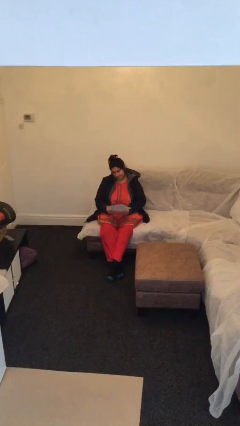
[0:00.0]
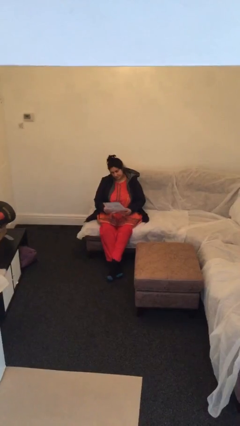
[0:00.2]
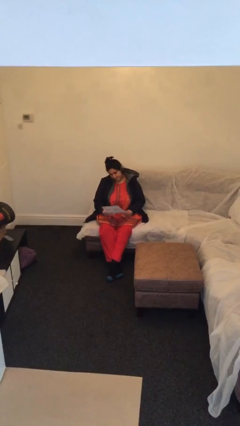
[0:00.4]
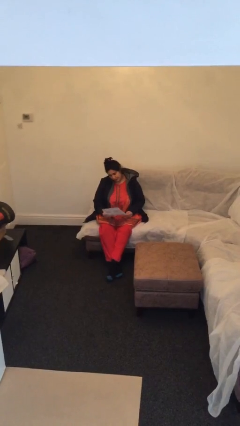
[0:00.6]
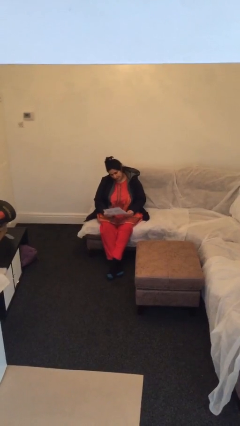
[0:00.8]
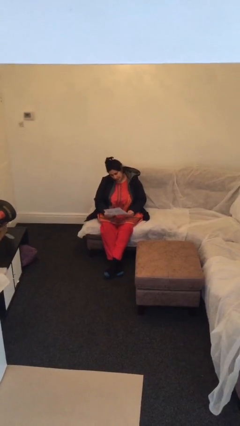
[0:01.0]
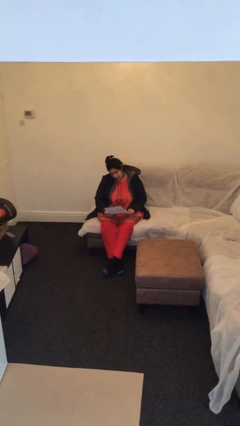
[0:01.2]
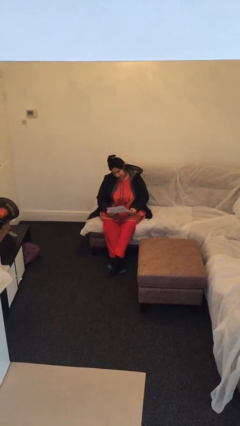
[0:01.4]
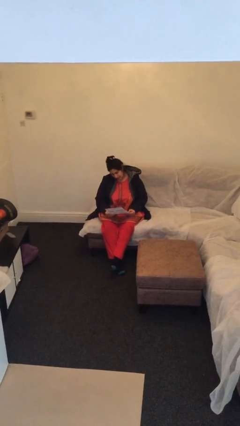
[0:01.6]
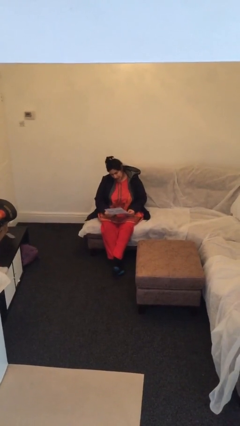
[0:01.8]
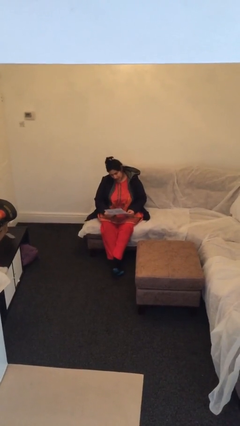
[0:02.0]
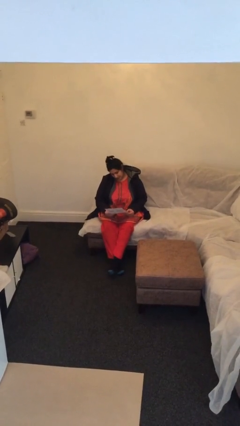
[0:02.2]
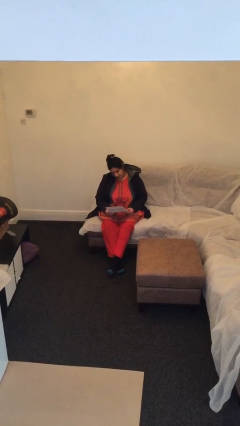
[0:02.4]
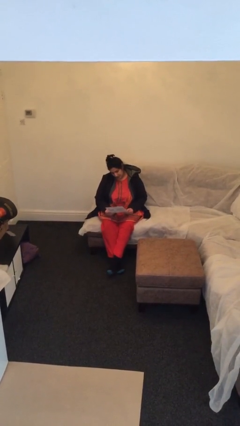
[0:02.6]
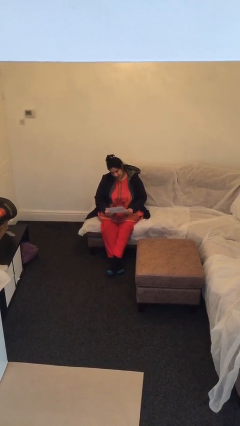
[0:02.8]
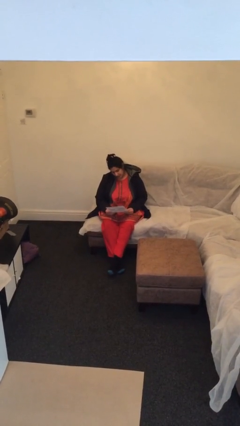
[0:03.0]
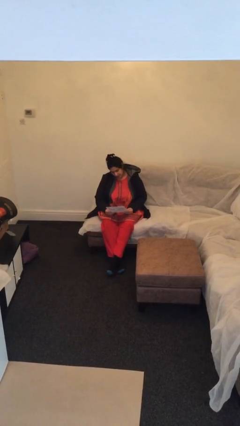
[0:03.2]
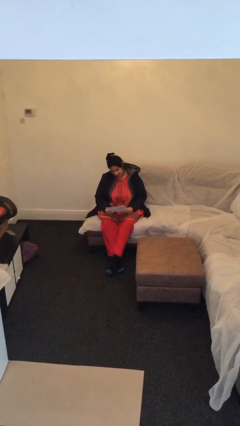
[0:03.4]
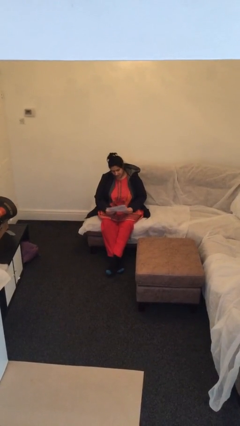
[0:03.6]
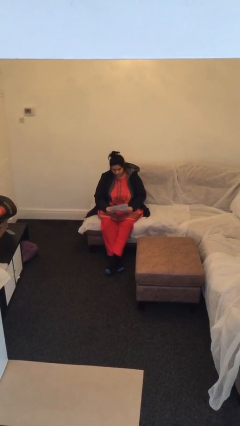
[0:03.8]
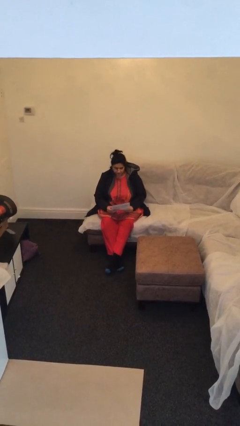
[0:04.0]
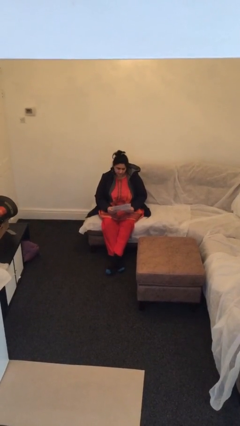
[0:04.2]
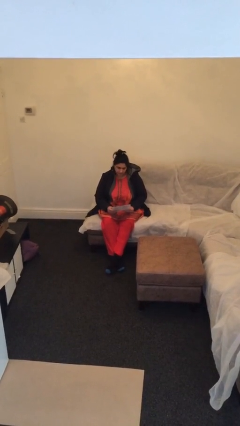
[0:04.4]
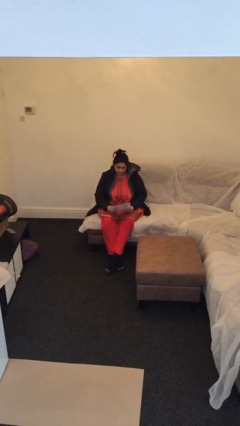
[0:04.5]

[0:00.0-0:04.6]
person reads document

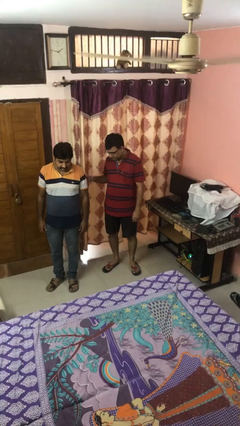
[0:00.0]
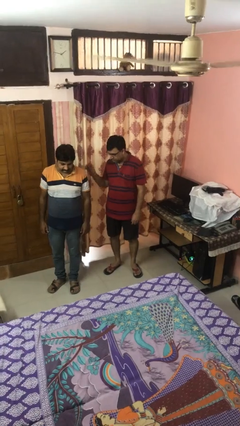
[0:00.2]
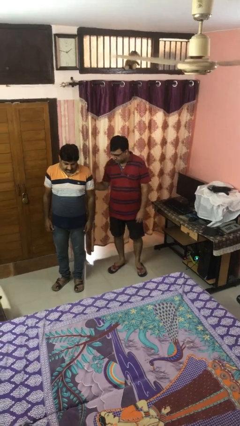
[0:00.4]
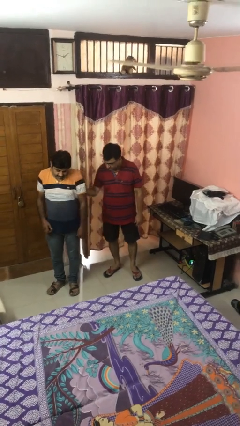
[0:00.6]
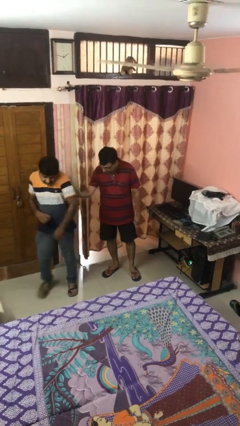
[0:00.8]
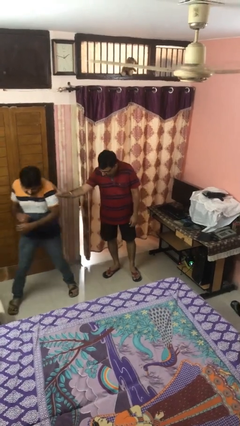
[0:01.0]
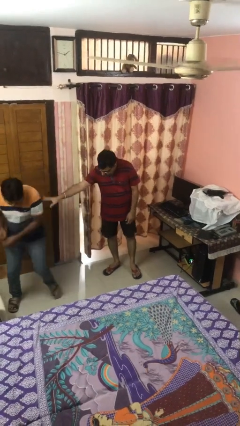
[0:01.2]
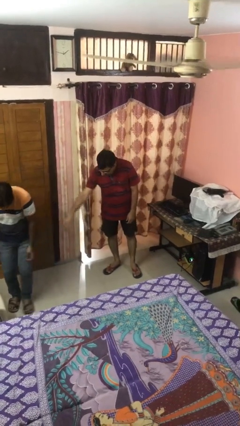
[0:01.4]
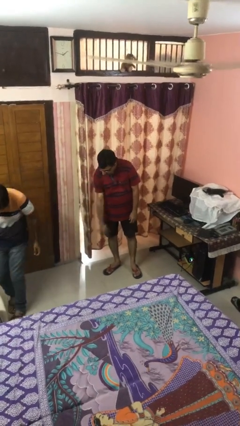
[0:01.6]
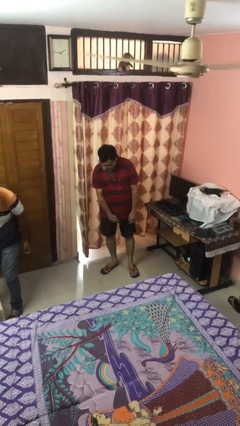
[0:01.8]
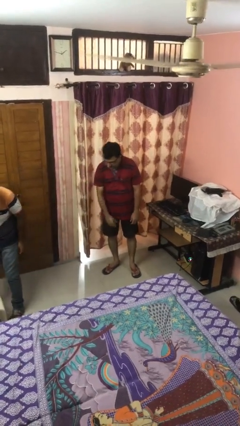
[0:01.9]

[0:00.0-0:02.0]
person shoves person

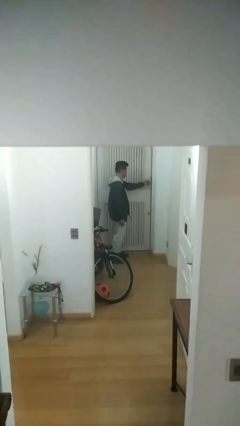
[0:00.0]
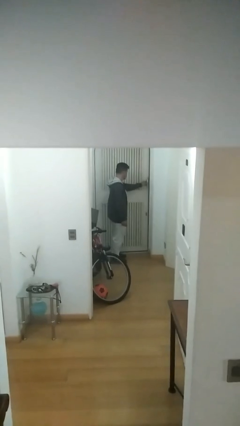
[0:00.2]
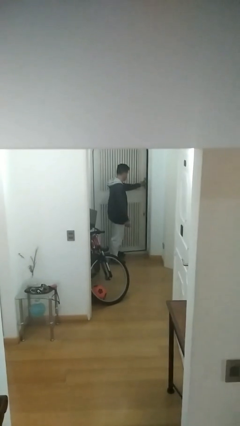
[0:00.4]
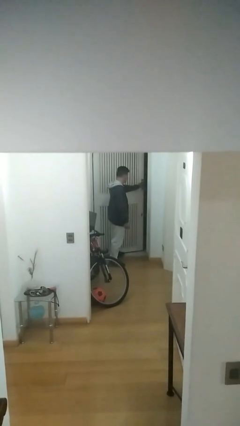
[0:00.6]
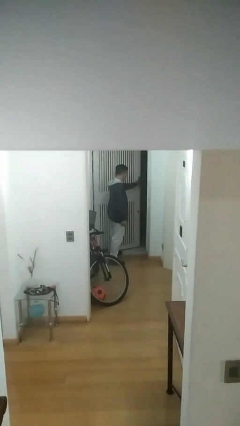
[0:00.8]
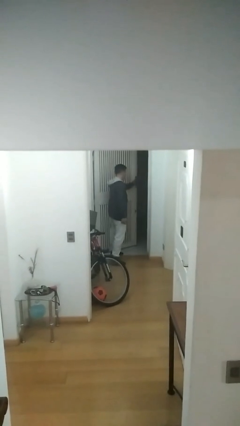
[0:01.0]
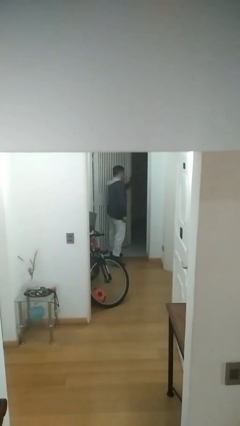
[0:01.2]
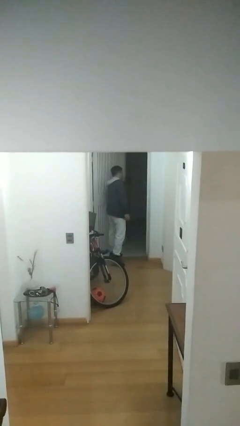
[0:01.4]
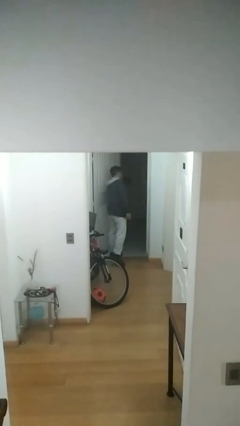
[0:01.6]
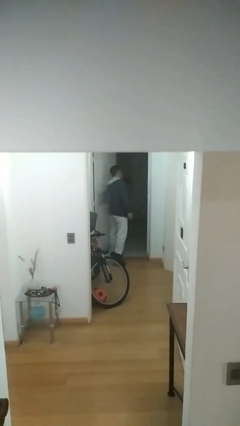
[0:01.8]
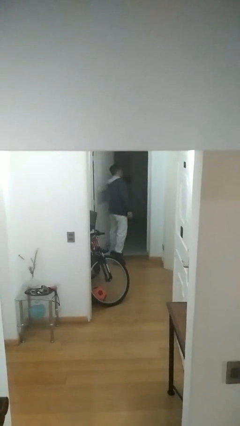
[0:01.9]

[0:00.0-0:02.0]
person opens facility door

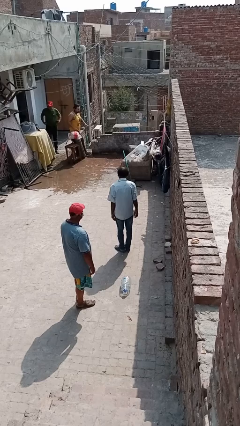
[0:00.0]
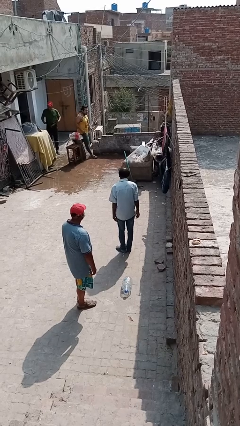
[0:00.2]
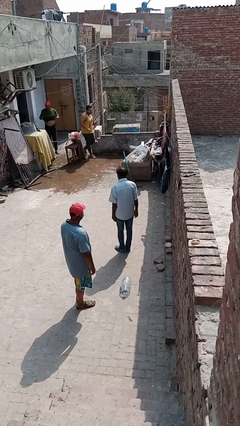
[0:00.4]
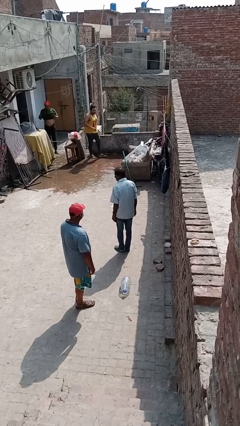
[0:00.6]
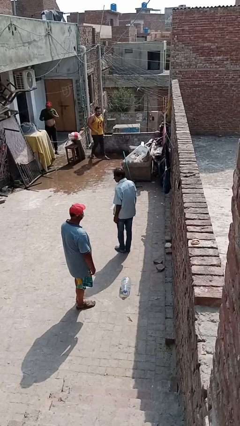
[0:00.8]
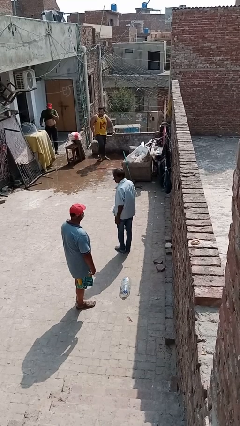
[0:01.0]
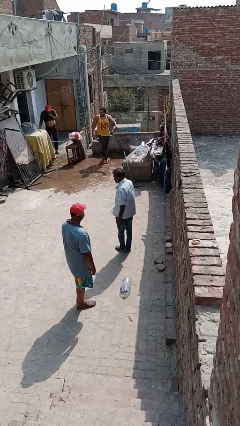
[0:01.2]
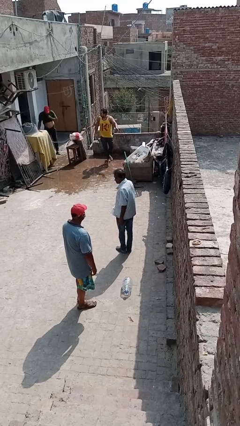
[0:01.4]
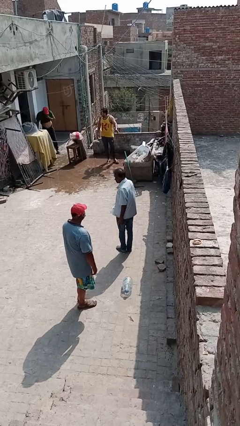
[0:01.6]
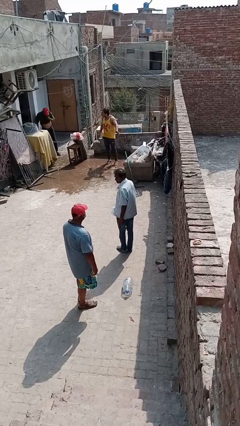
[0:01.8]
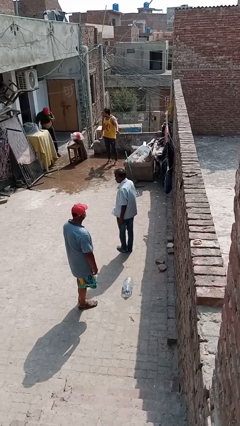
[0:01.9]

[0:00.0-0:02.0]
person looks over shoulder

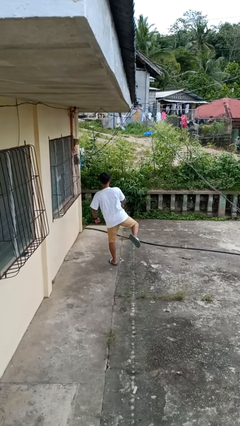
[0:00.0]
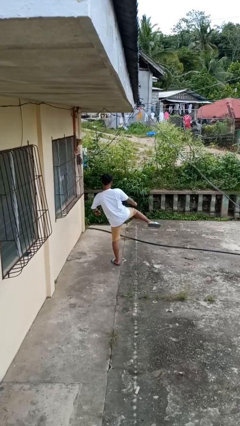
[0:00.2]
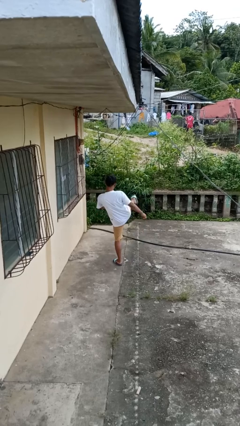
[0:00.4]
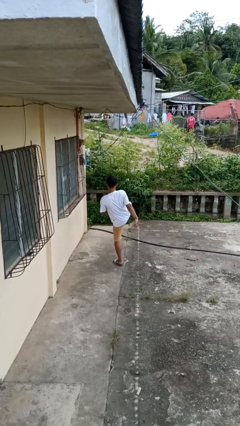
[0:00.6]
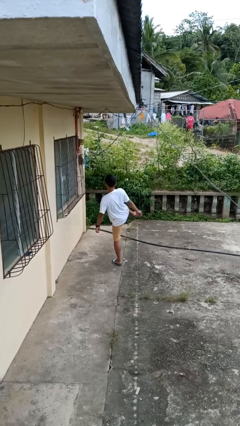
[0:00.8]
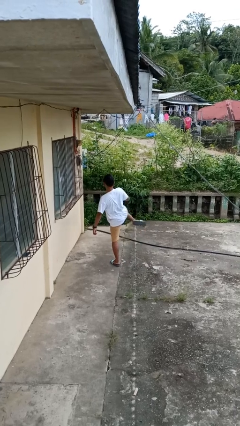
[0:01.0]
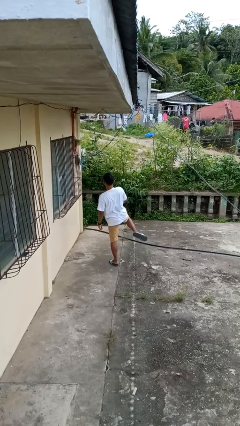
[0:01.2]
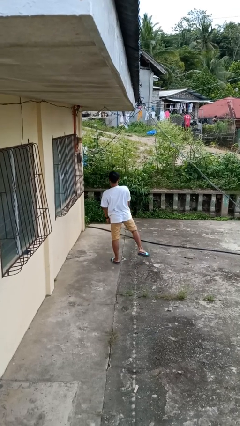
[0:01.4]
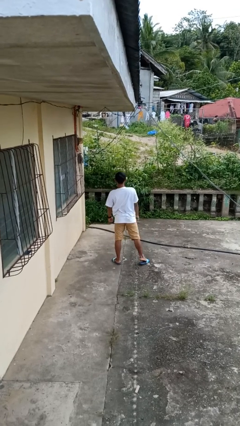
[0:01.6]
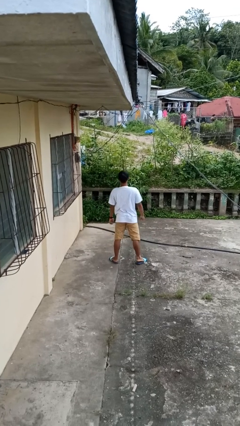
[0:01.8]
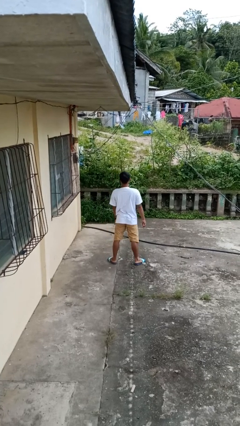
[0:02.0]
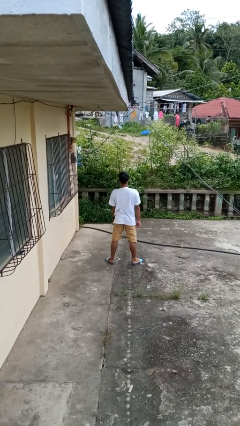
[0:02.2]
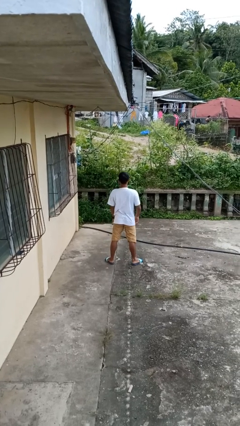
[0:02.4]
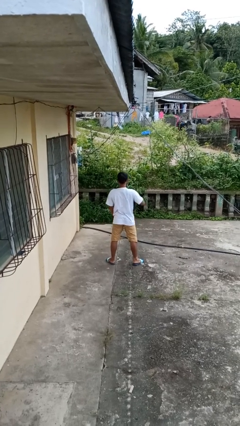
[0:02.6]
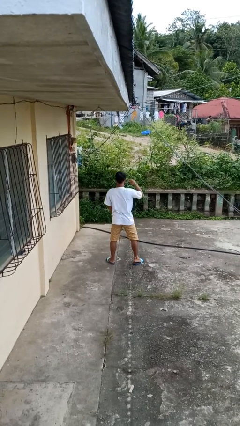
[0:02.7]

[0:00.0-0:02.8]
person karate kicks

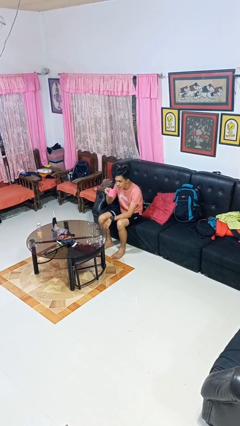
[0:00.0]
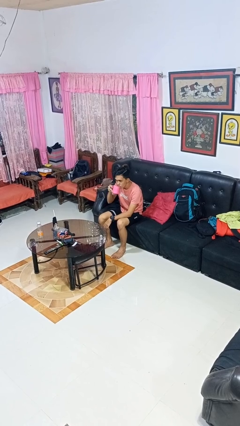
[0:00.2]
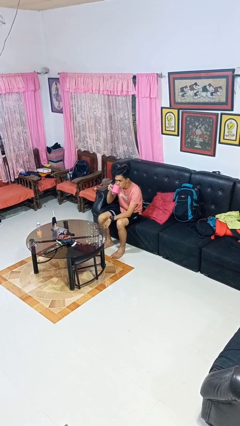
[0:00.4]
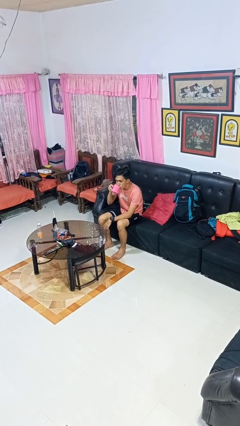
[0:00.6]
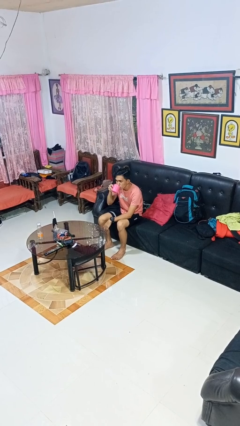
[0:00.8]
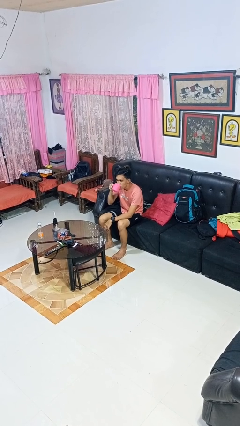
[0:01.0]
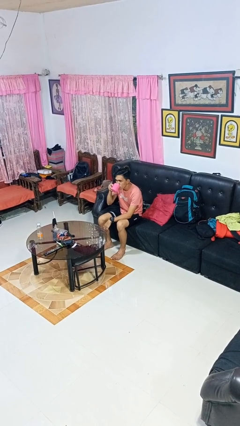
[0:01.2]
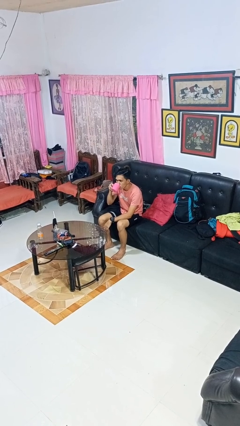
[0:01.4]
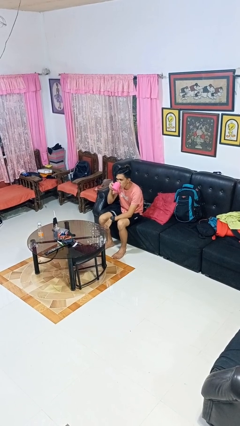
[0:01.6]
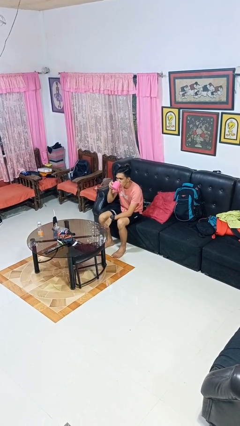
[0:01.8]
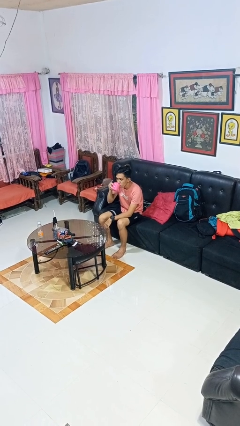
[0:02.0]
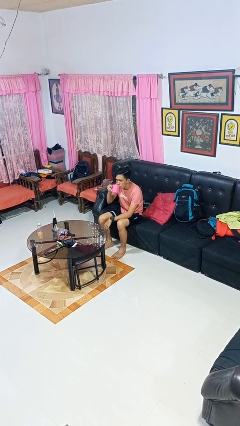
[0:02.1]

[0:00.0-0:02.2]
person drinks from mug

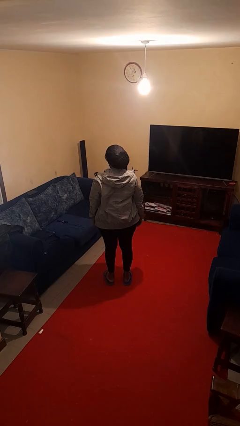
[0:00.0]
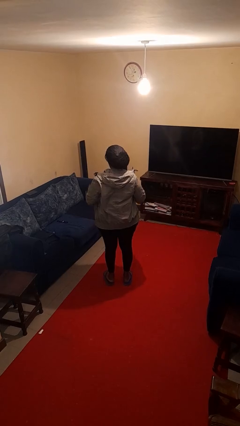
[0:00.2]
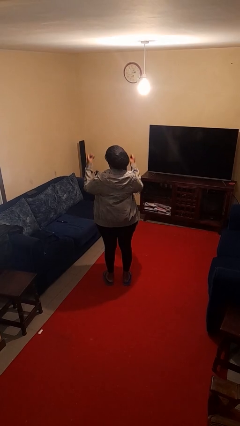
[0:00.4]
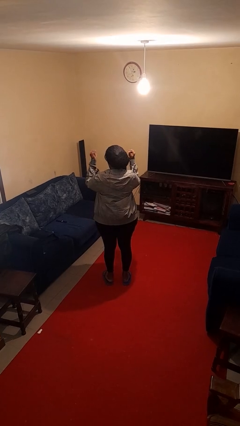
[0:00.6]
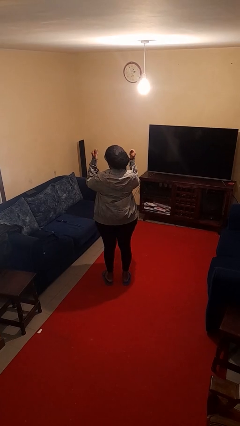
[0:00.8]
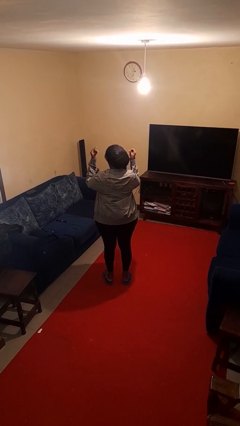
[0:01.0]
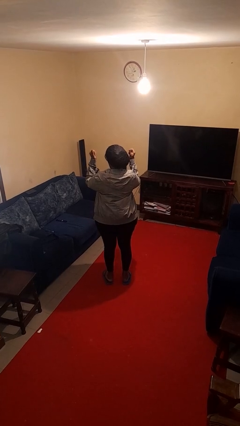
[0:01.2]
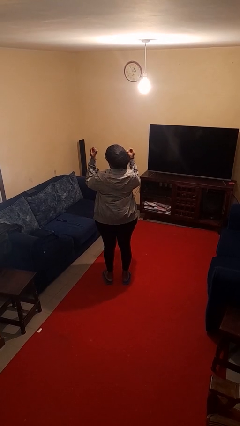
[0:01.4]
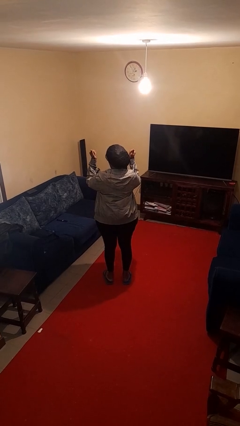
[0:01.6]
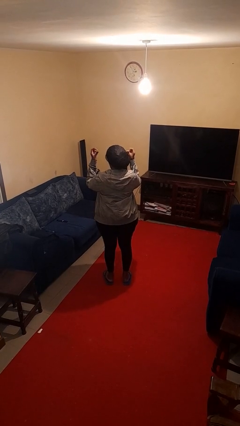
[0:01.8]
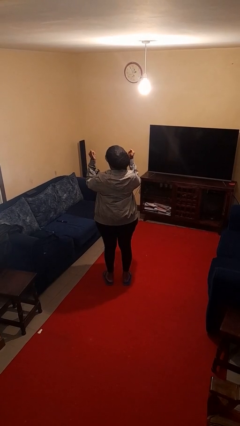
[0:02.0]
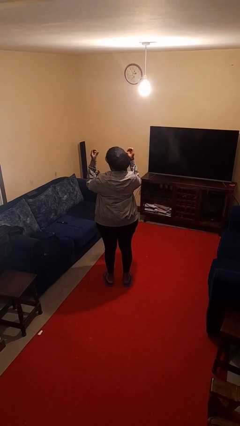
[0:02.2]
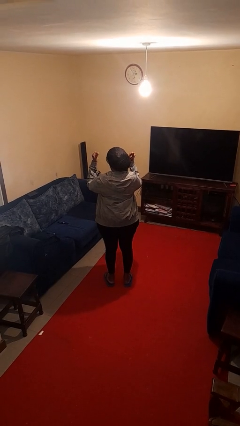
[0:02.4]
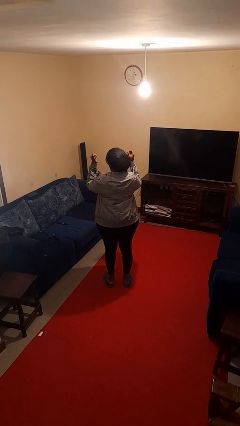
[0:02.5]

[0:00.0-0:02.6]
person snaps fingers
